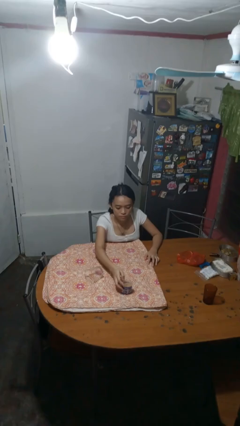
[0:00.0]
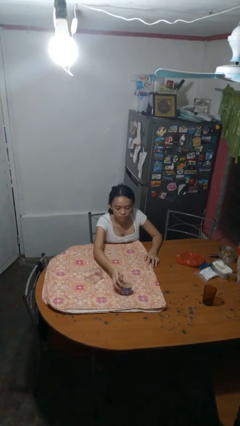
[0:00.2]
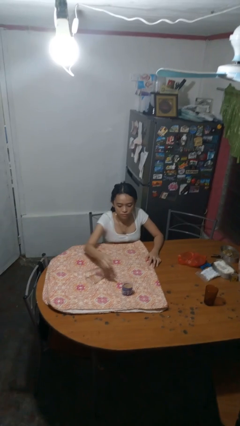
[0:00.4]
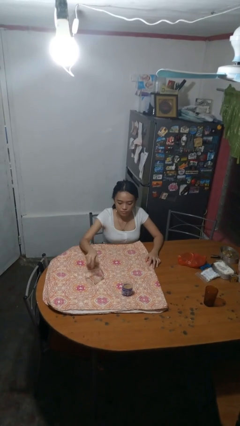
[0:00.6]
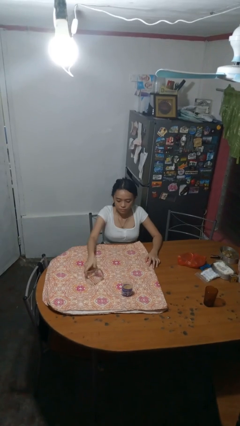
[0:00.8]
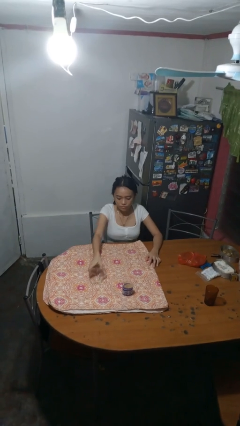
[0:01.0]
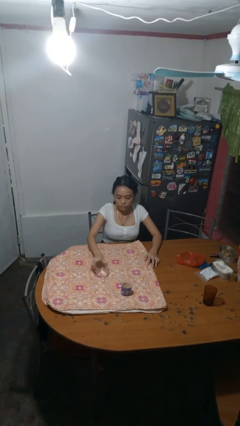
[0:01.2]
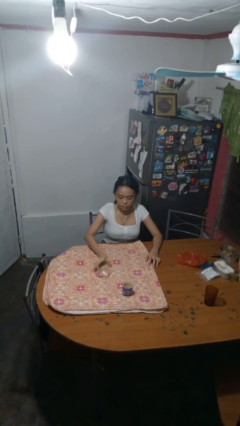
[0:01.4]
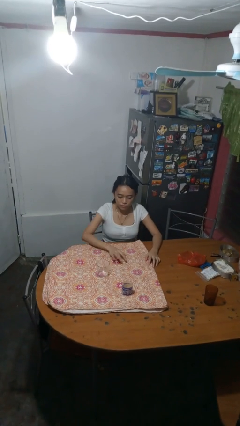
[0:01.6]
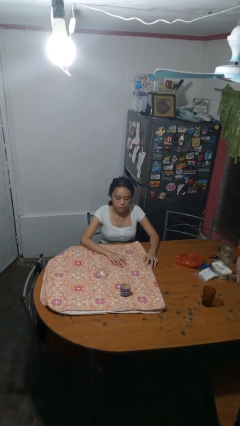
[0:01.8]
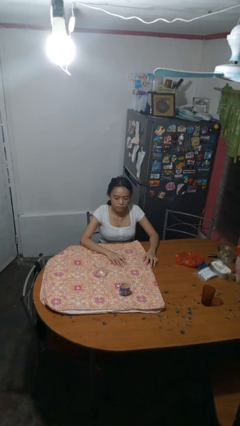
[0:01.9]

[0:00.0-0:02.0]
person sets upright glass

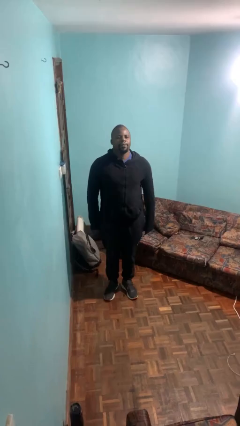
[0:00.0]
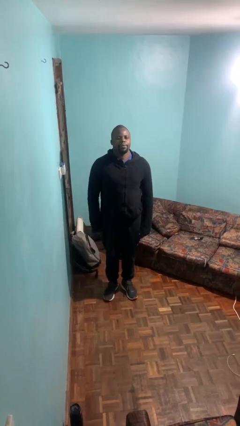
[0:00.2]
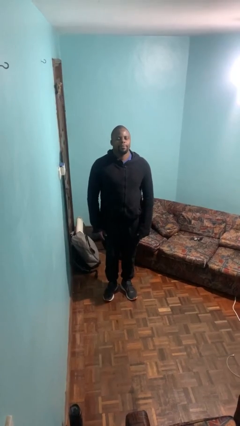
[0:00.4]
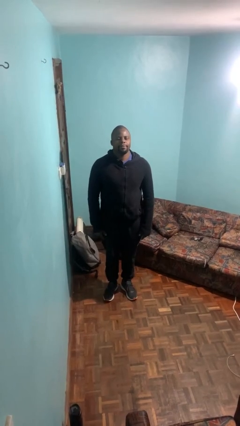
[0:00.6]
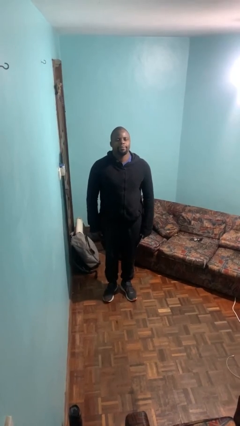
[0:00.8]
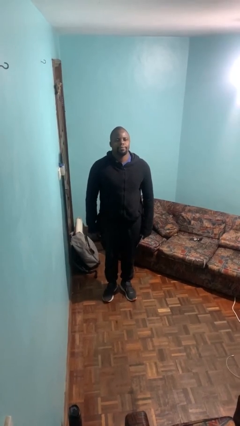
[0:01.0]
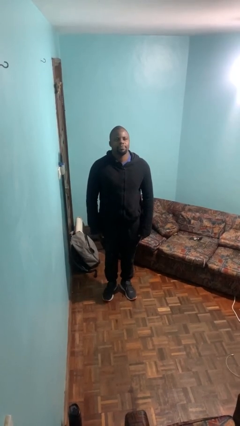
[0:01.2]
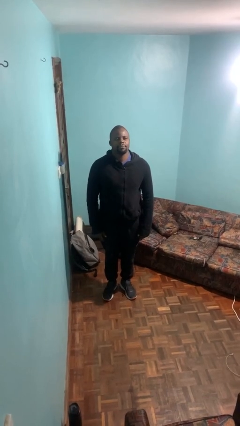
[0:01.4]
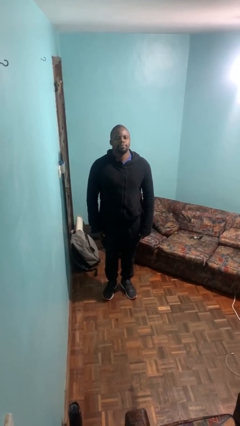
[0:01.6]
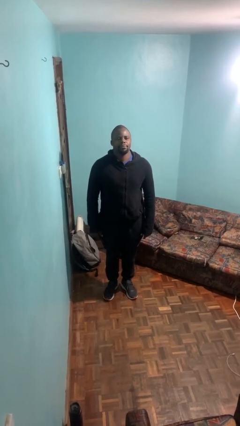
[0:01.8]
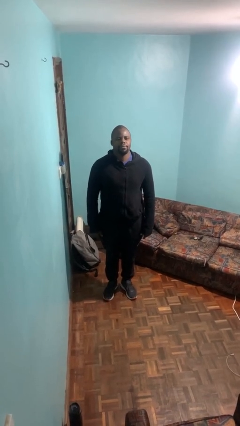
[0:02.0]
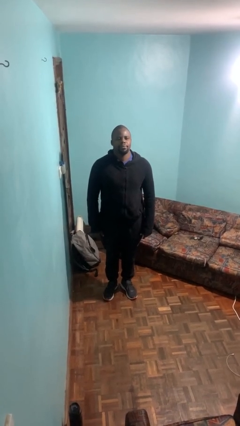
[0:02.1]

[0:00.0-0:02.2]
person jumps

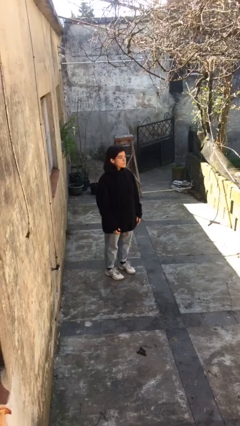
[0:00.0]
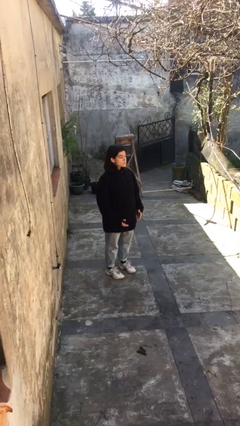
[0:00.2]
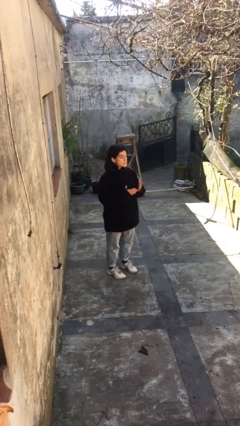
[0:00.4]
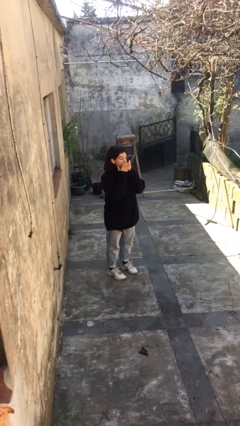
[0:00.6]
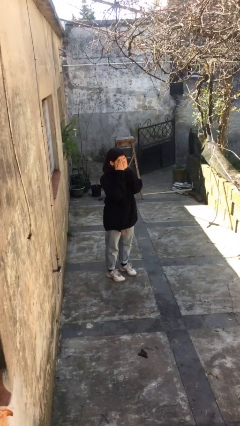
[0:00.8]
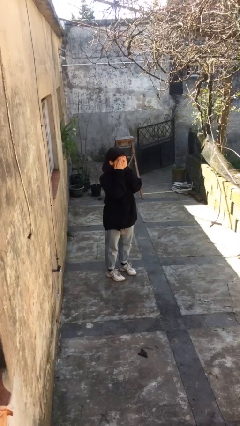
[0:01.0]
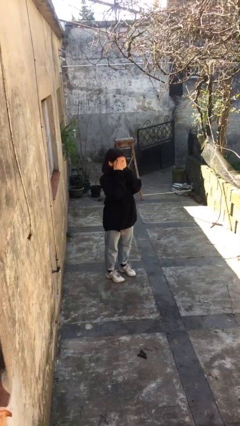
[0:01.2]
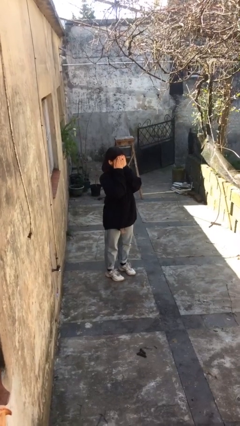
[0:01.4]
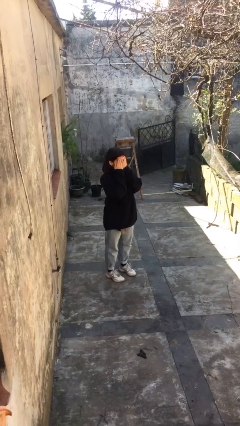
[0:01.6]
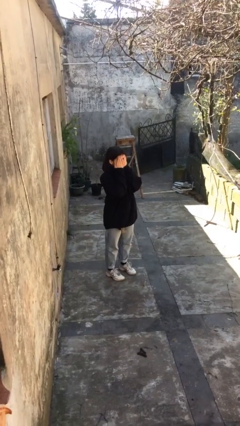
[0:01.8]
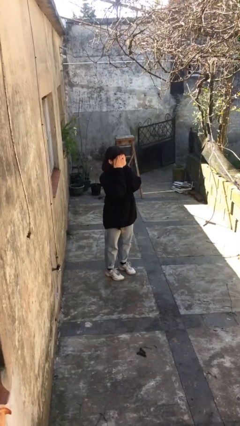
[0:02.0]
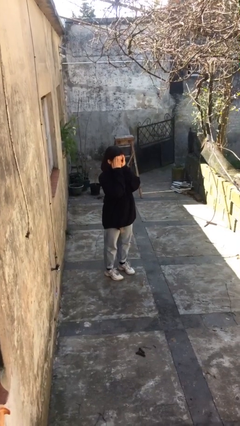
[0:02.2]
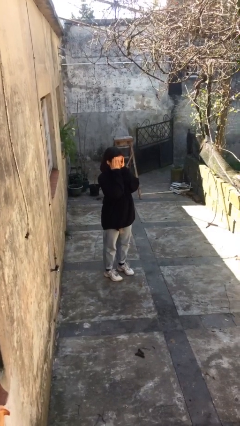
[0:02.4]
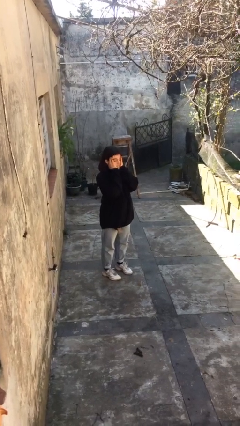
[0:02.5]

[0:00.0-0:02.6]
person covers face with hands

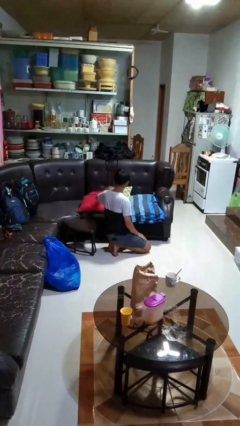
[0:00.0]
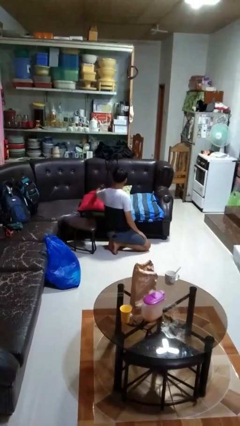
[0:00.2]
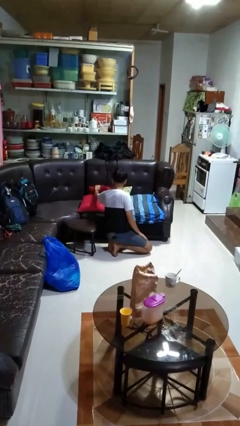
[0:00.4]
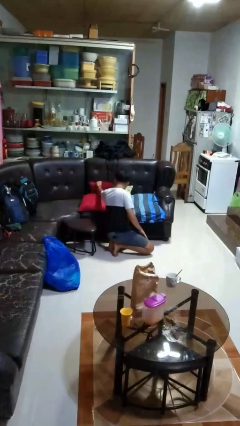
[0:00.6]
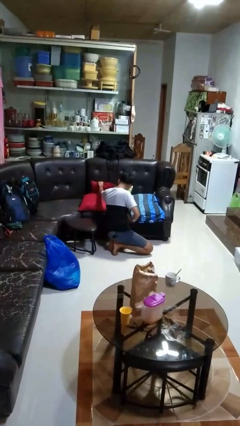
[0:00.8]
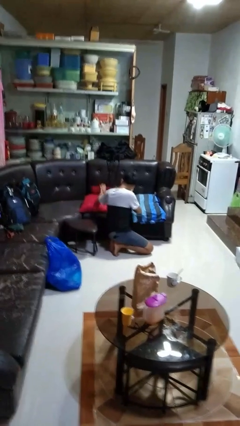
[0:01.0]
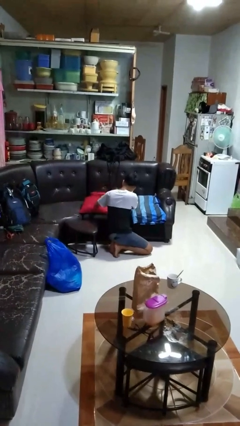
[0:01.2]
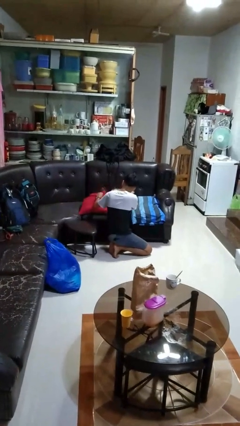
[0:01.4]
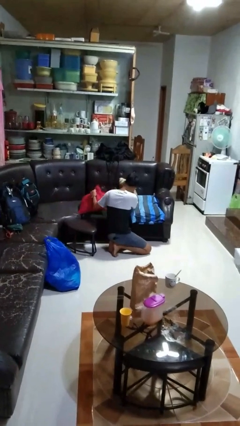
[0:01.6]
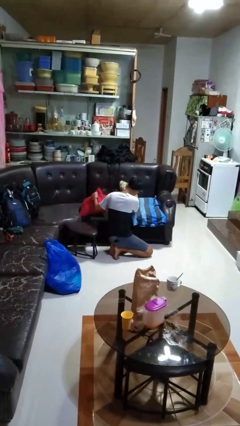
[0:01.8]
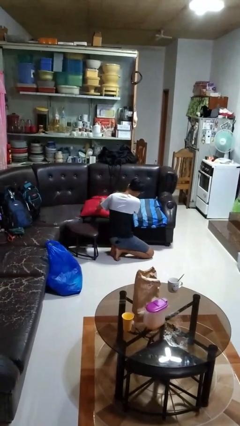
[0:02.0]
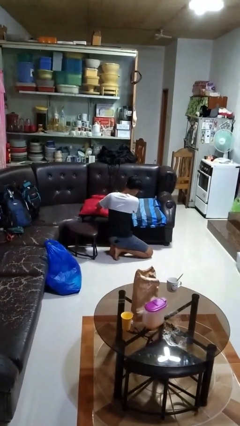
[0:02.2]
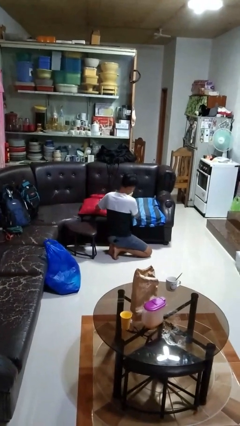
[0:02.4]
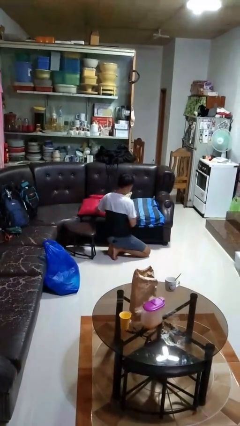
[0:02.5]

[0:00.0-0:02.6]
person searches in couch

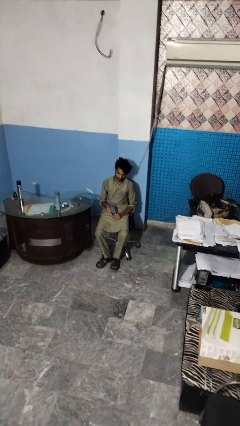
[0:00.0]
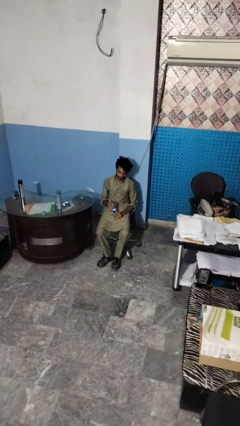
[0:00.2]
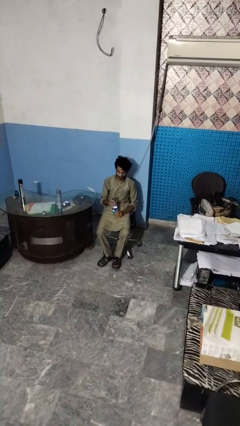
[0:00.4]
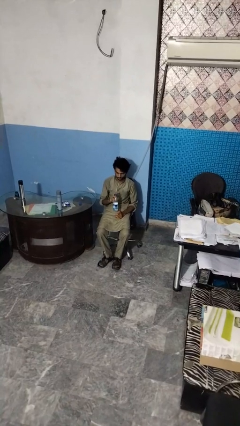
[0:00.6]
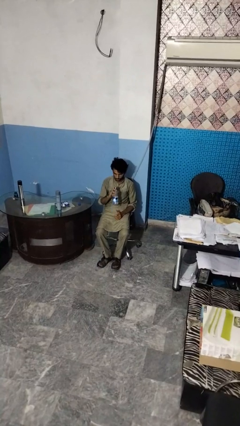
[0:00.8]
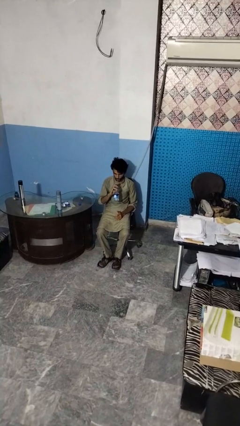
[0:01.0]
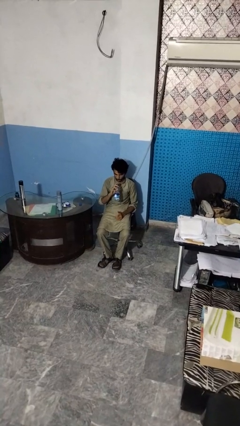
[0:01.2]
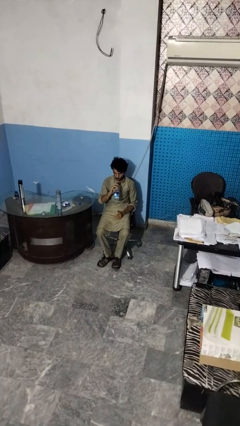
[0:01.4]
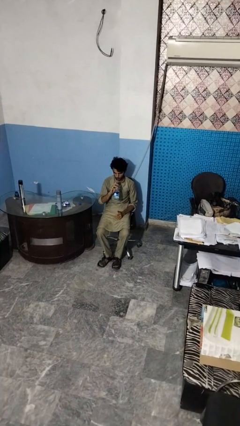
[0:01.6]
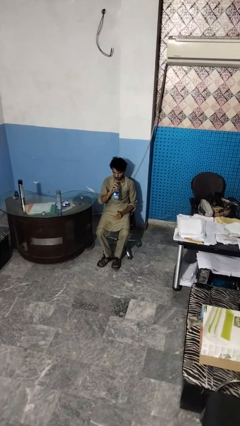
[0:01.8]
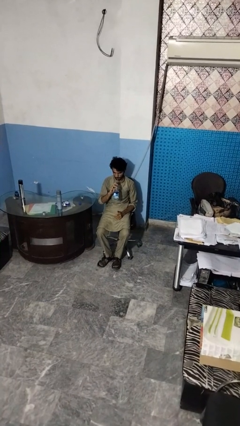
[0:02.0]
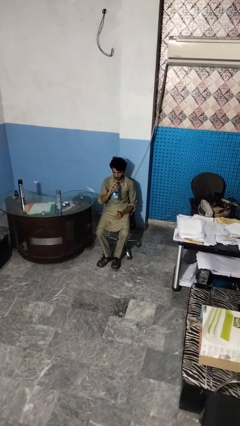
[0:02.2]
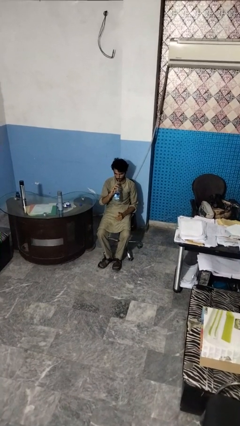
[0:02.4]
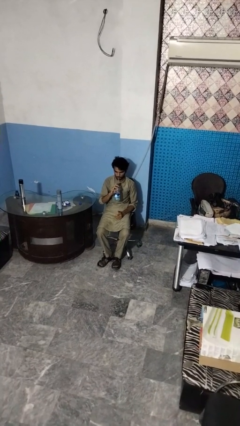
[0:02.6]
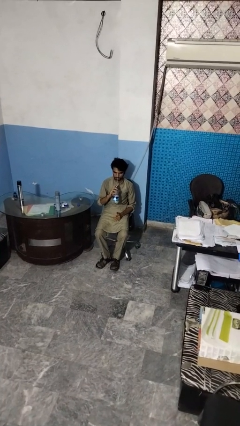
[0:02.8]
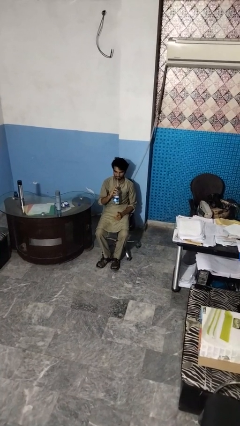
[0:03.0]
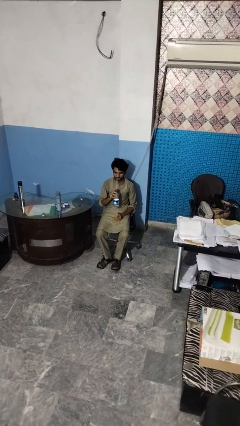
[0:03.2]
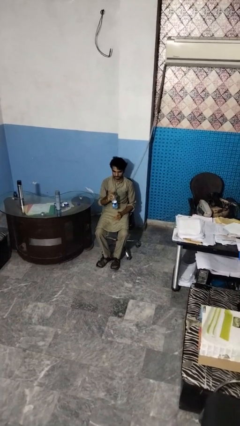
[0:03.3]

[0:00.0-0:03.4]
person drinks from straw

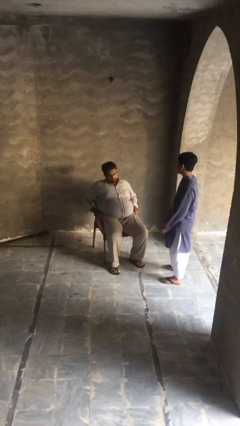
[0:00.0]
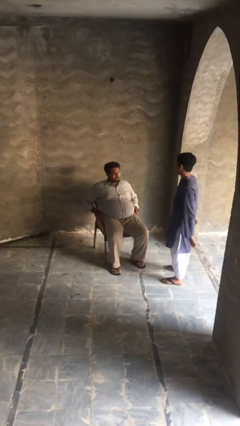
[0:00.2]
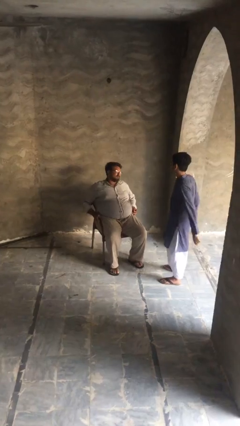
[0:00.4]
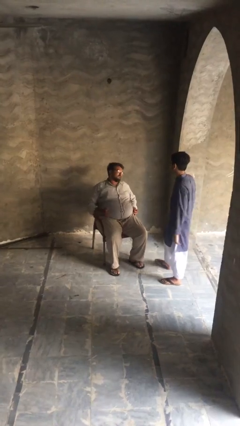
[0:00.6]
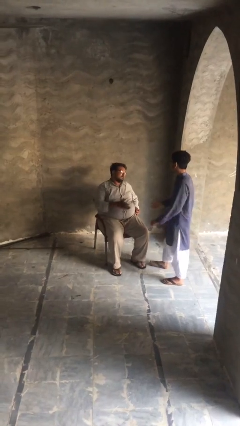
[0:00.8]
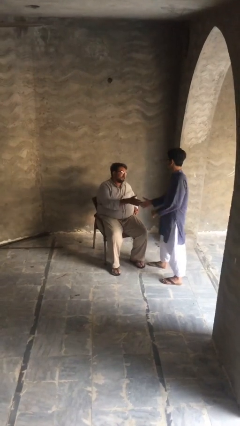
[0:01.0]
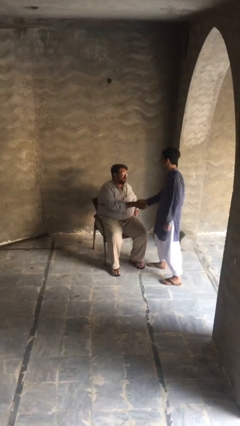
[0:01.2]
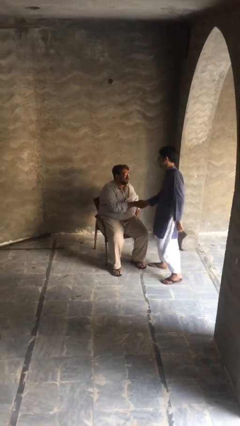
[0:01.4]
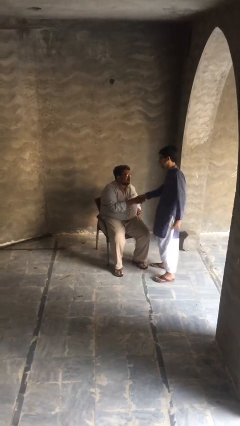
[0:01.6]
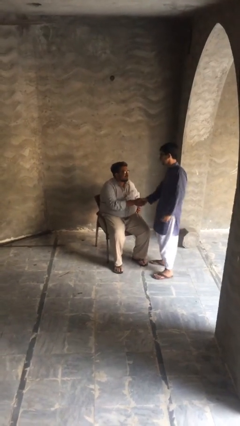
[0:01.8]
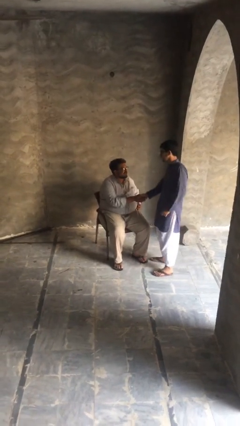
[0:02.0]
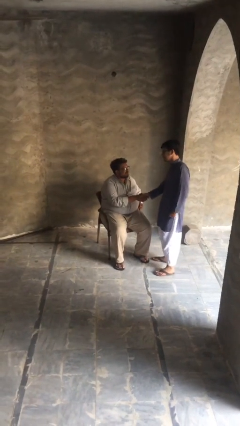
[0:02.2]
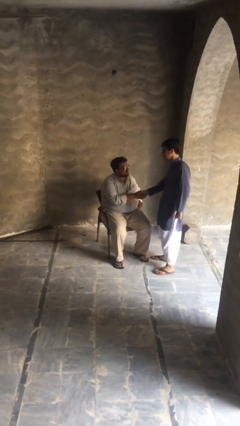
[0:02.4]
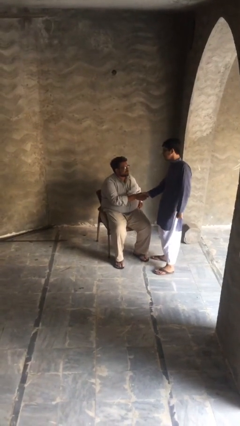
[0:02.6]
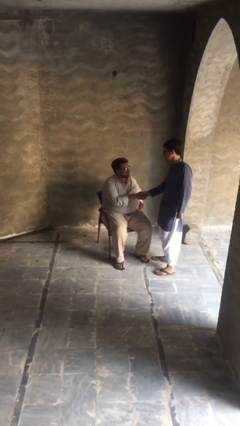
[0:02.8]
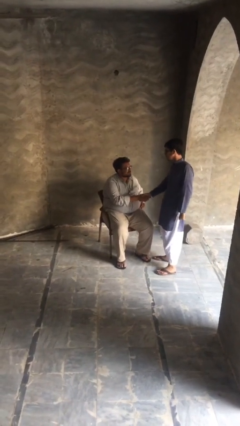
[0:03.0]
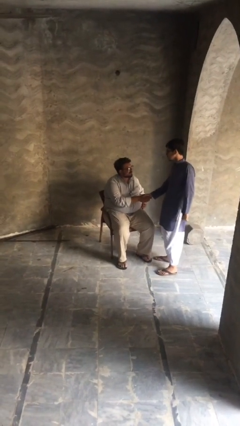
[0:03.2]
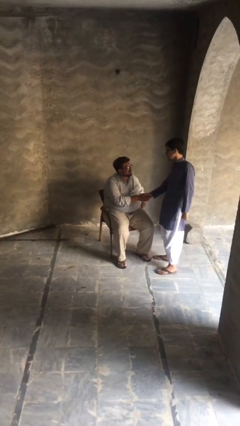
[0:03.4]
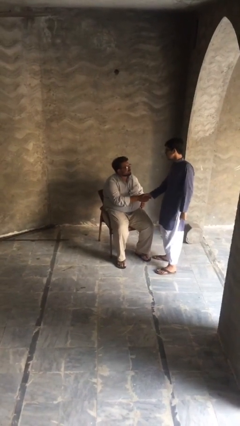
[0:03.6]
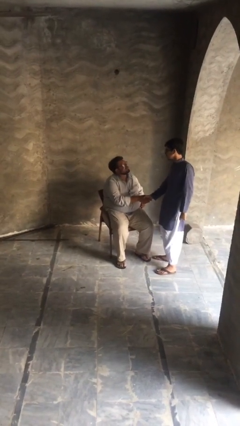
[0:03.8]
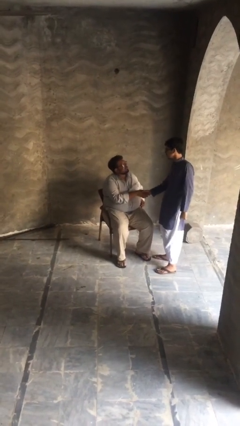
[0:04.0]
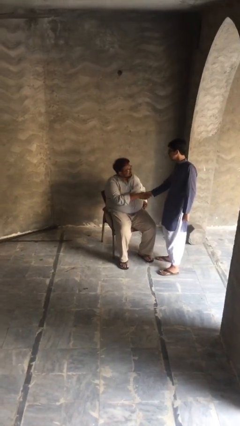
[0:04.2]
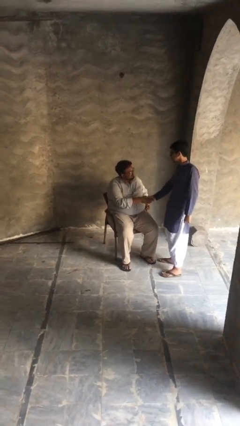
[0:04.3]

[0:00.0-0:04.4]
person shakes hand
